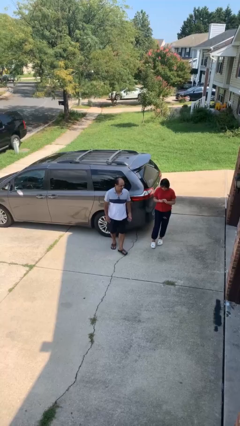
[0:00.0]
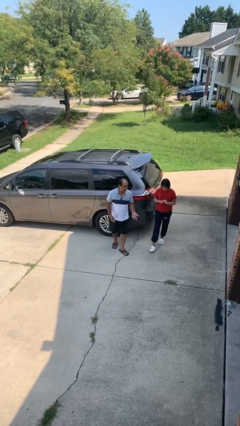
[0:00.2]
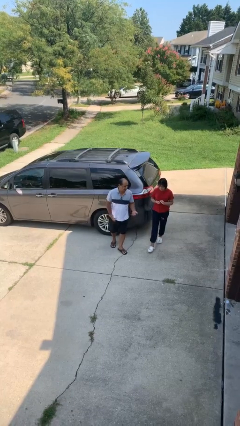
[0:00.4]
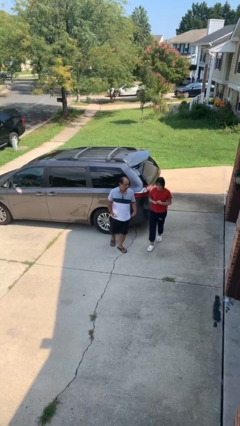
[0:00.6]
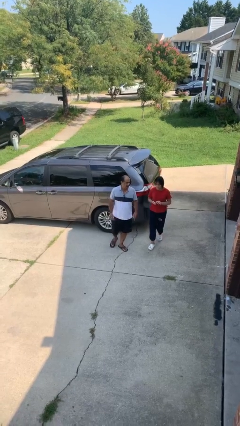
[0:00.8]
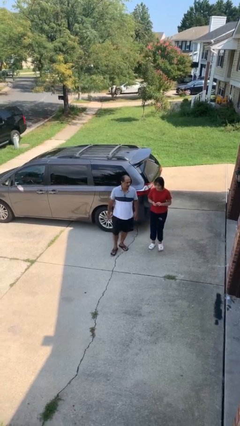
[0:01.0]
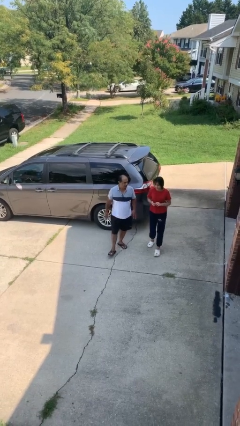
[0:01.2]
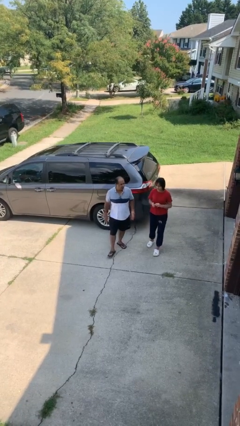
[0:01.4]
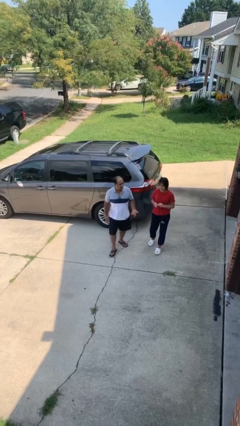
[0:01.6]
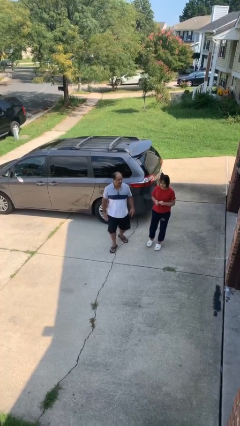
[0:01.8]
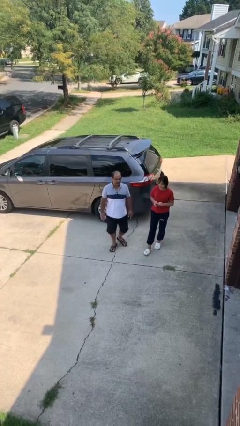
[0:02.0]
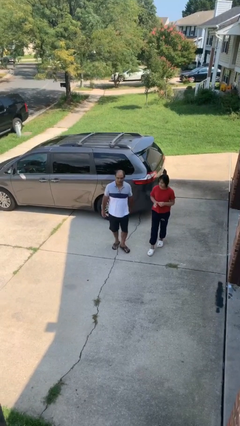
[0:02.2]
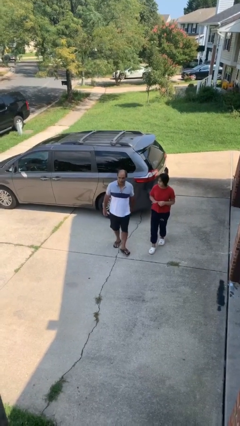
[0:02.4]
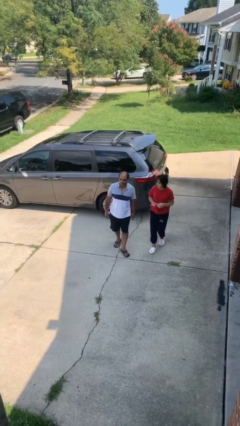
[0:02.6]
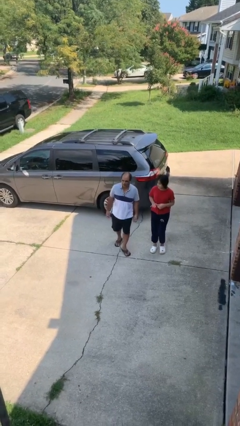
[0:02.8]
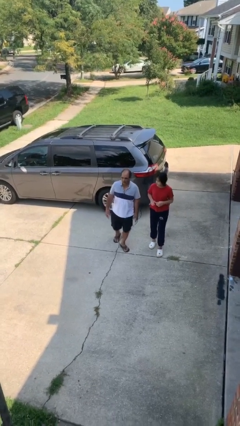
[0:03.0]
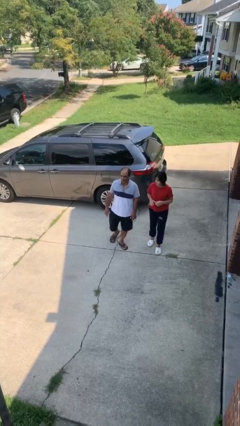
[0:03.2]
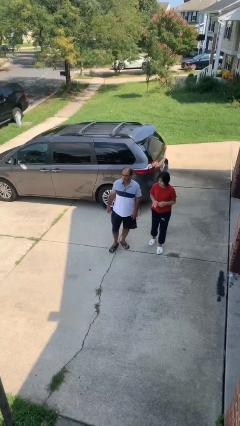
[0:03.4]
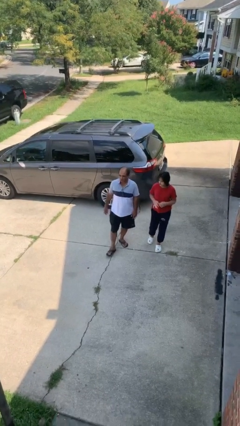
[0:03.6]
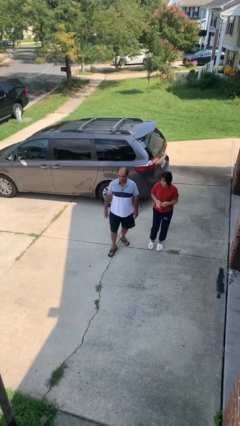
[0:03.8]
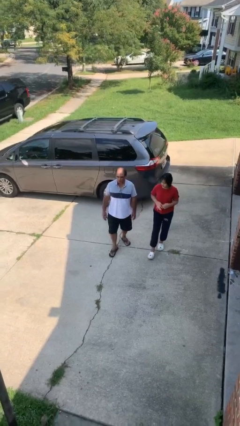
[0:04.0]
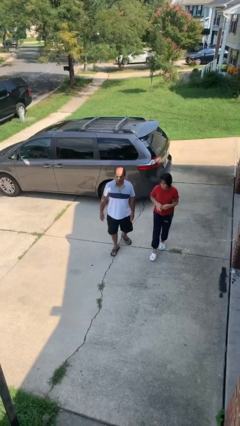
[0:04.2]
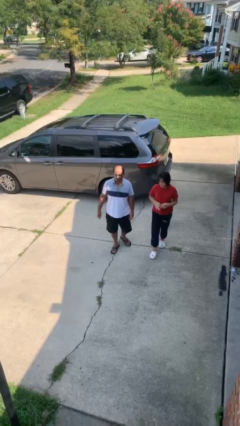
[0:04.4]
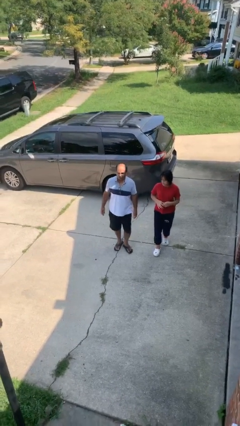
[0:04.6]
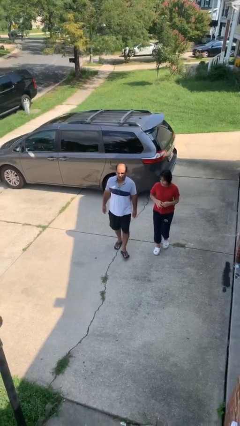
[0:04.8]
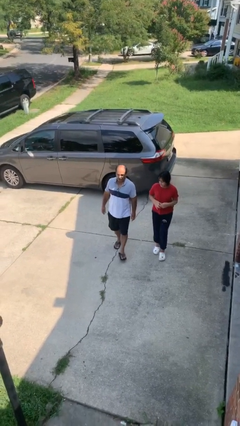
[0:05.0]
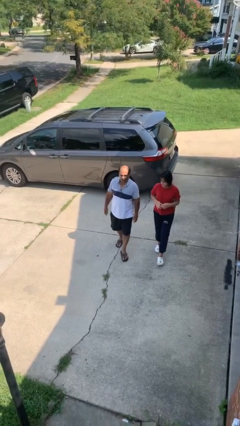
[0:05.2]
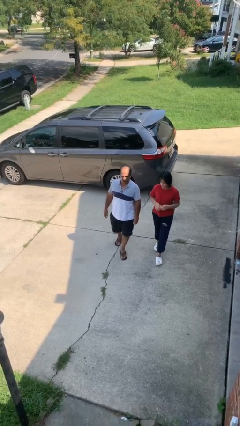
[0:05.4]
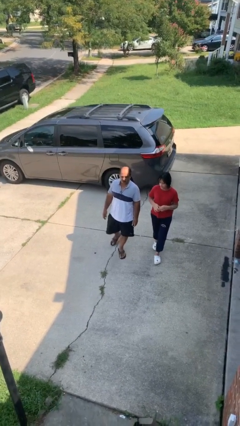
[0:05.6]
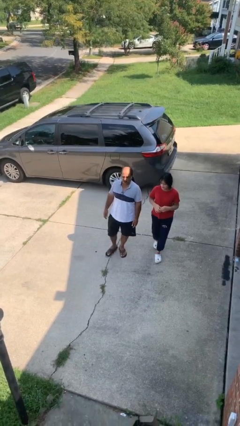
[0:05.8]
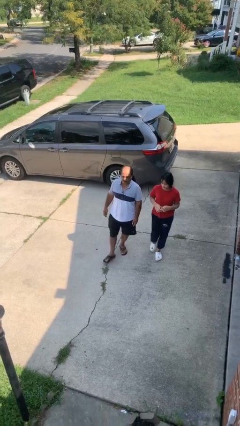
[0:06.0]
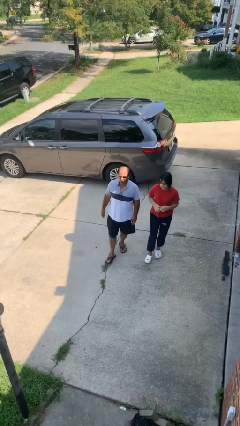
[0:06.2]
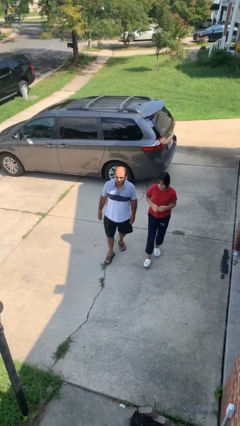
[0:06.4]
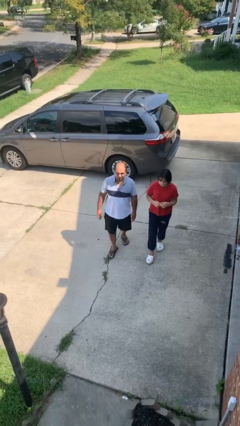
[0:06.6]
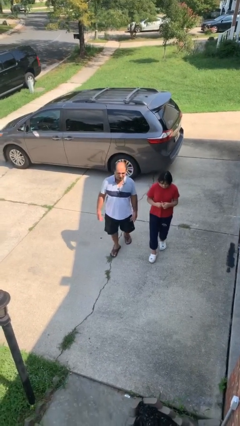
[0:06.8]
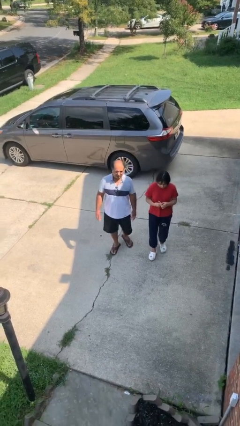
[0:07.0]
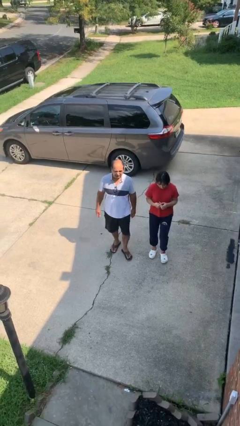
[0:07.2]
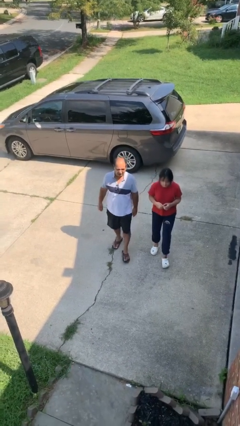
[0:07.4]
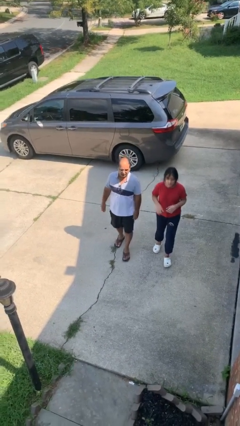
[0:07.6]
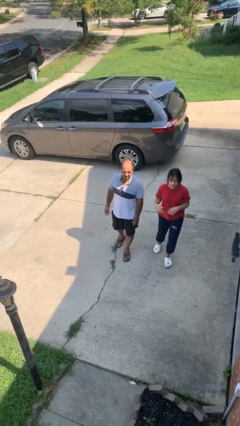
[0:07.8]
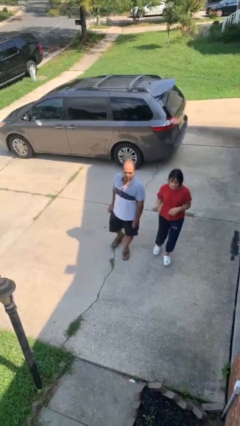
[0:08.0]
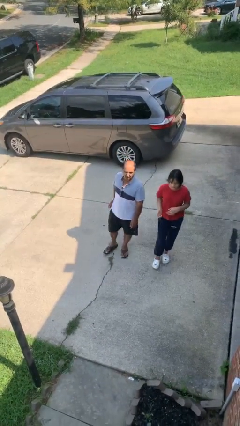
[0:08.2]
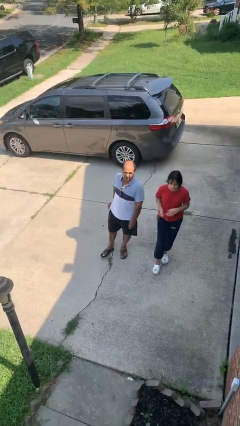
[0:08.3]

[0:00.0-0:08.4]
person talks to person

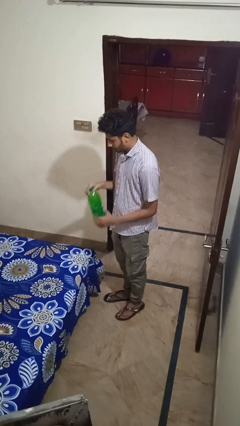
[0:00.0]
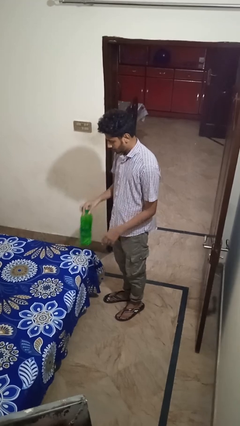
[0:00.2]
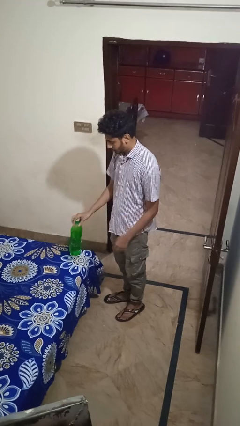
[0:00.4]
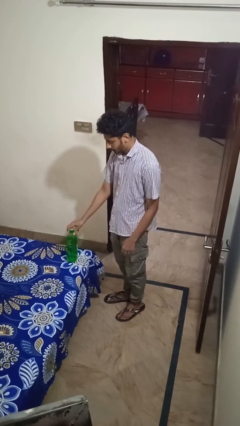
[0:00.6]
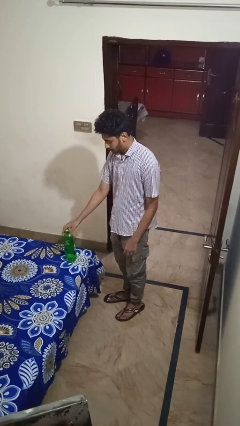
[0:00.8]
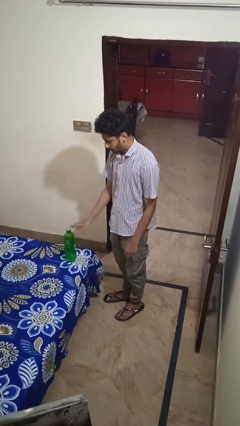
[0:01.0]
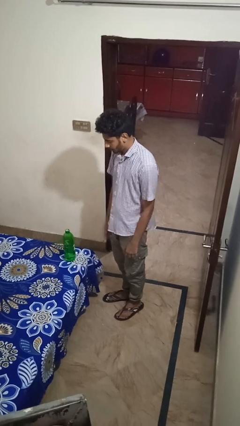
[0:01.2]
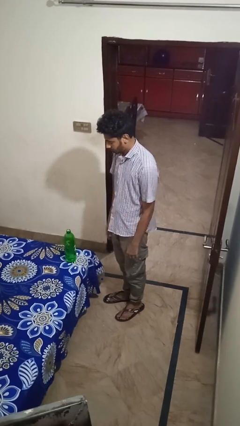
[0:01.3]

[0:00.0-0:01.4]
person puts down object on bed

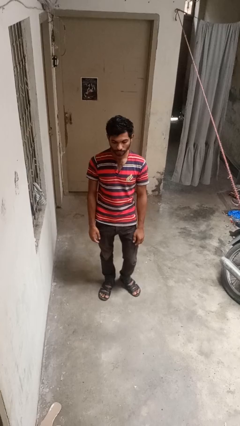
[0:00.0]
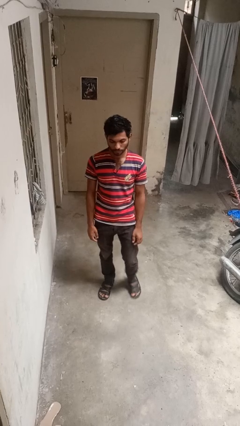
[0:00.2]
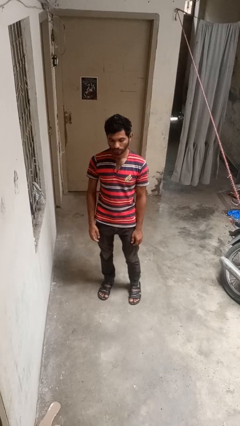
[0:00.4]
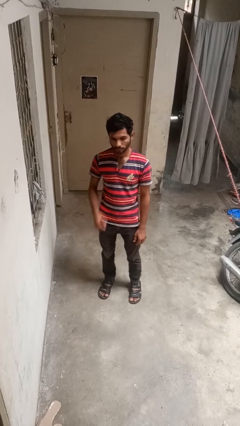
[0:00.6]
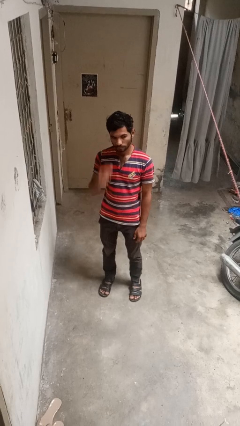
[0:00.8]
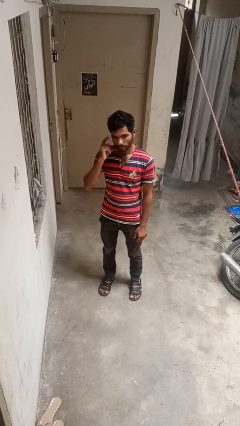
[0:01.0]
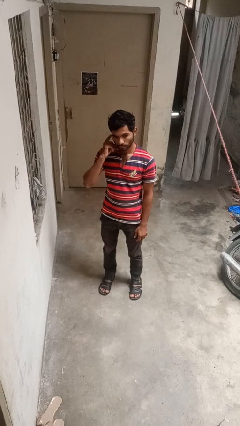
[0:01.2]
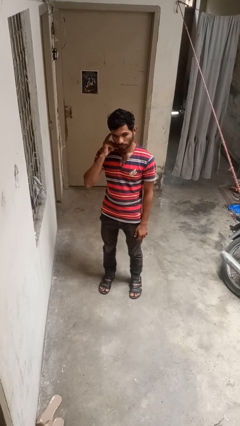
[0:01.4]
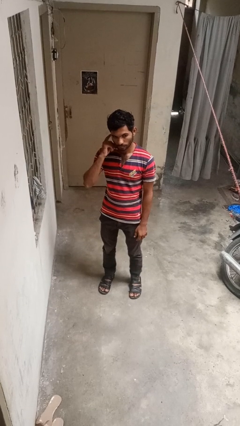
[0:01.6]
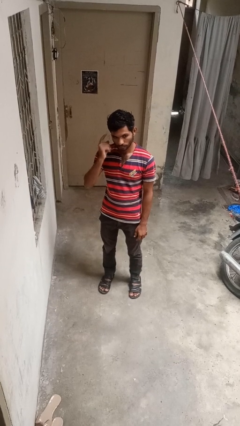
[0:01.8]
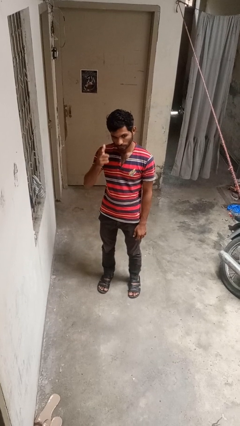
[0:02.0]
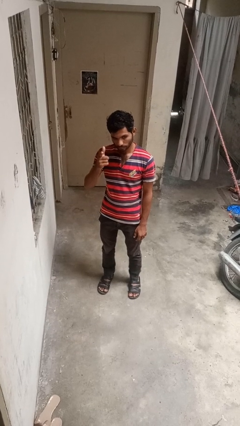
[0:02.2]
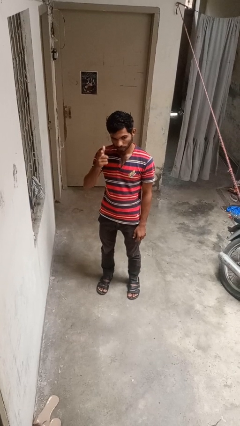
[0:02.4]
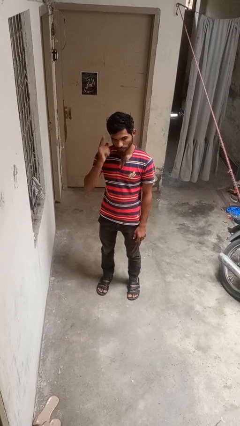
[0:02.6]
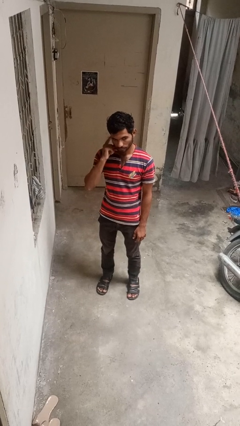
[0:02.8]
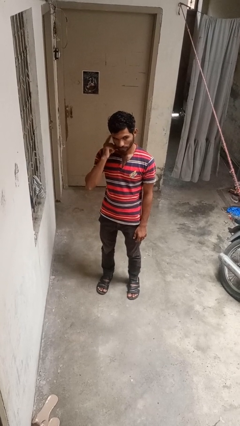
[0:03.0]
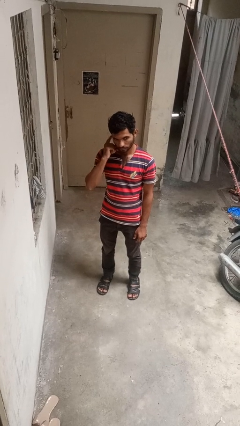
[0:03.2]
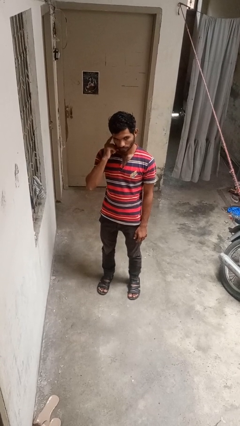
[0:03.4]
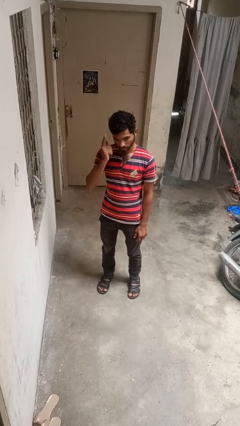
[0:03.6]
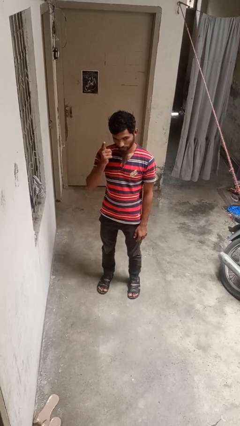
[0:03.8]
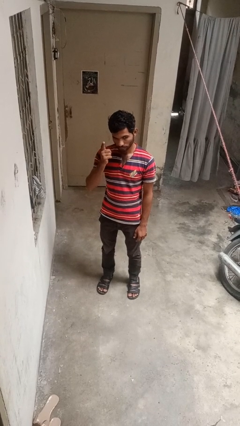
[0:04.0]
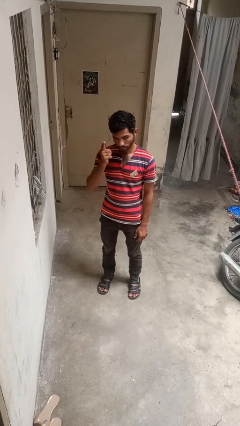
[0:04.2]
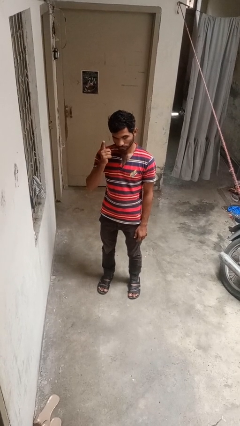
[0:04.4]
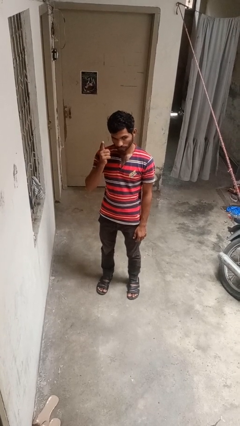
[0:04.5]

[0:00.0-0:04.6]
person gestures listen closely

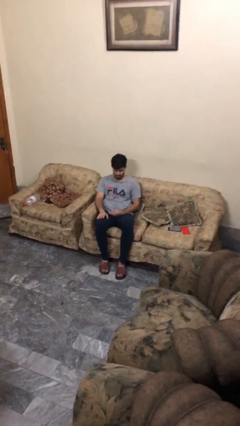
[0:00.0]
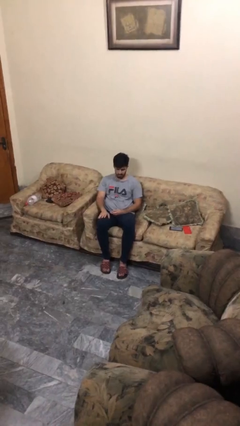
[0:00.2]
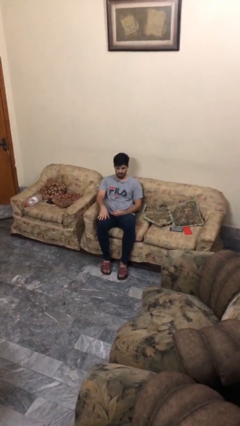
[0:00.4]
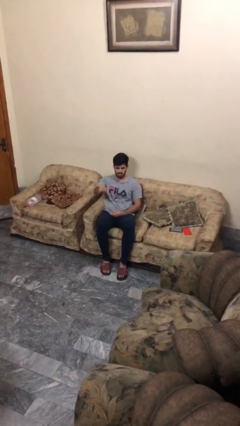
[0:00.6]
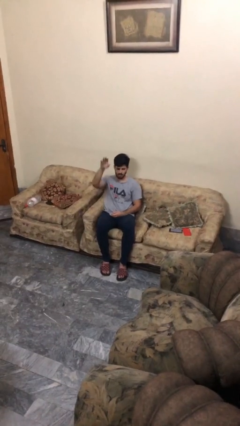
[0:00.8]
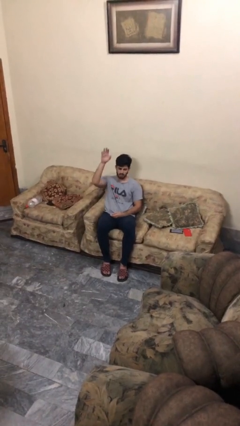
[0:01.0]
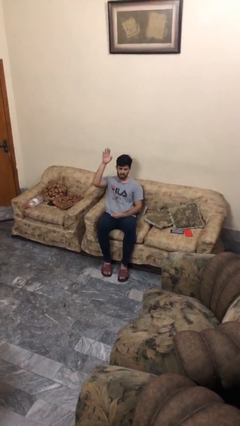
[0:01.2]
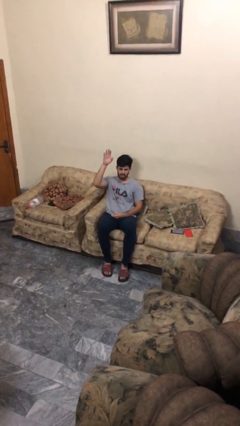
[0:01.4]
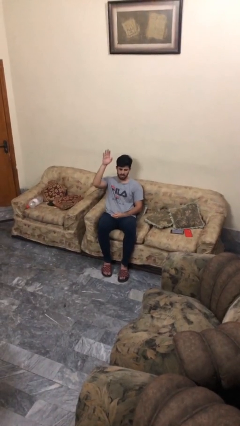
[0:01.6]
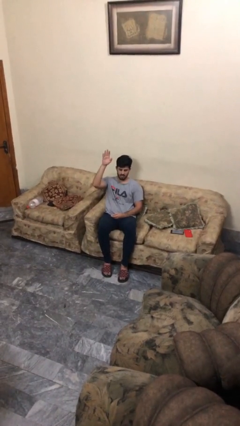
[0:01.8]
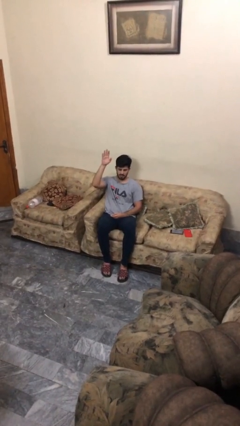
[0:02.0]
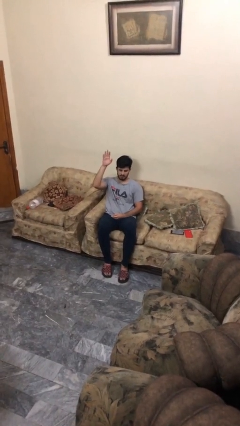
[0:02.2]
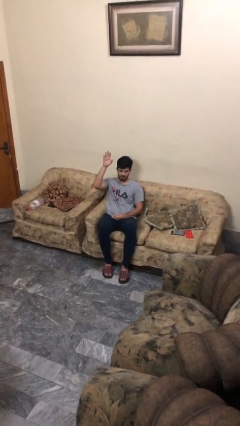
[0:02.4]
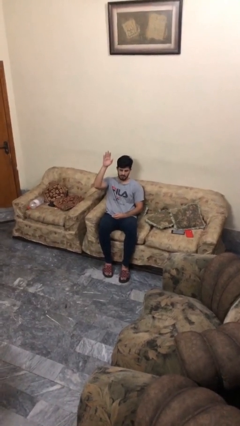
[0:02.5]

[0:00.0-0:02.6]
person gestures raise hand

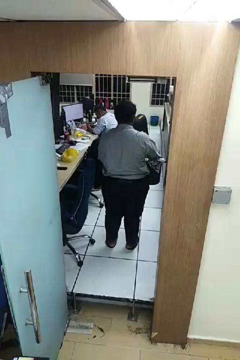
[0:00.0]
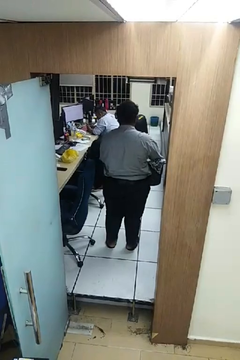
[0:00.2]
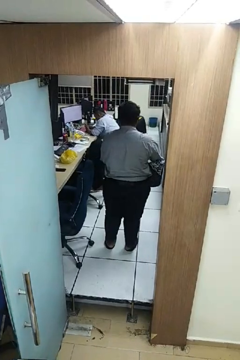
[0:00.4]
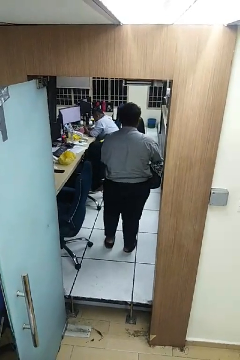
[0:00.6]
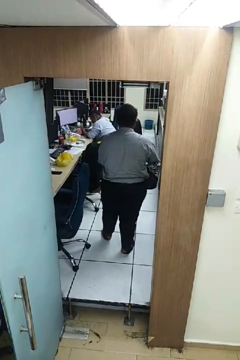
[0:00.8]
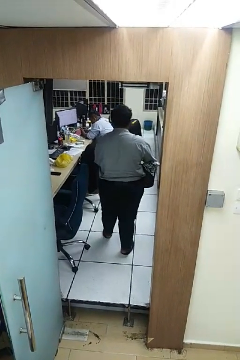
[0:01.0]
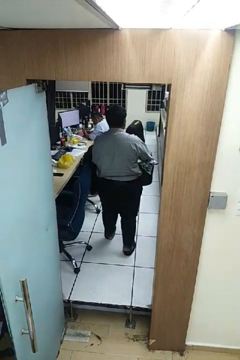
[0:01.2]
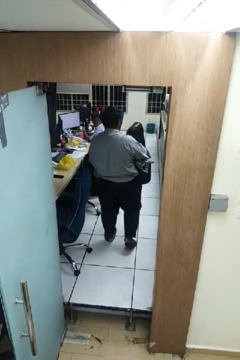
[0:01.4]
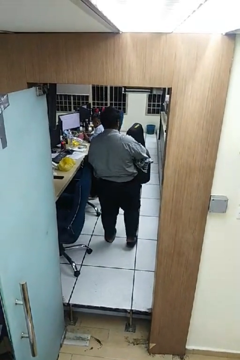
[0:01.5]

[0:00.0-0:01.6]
person carries laundry basket
